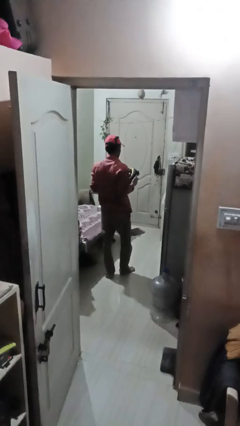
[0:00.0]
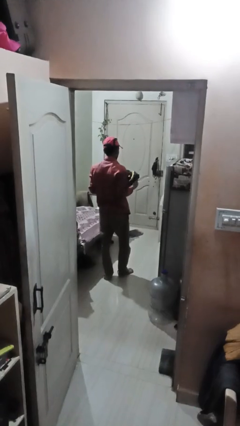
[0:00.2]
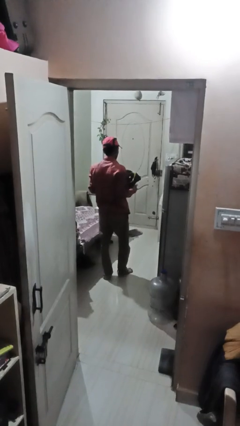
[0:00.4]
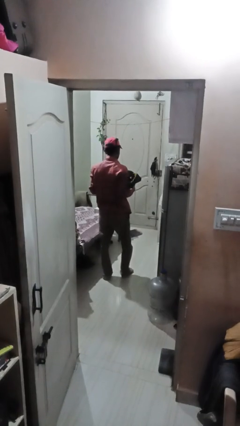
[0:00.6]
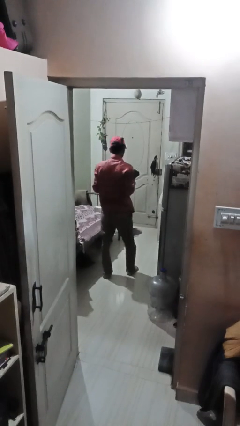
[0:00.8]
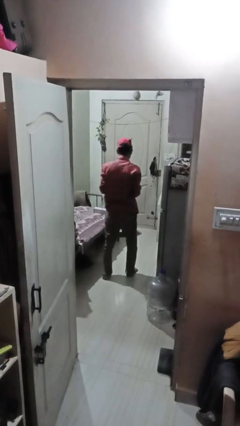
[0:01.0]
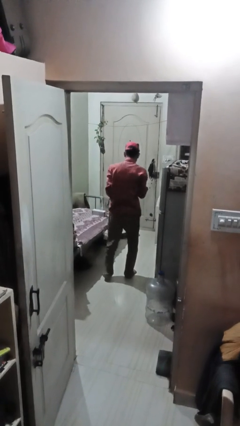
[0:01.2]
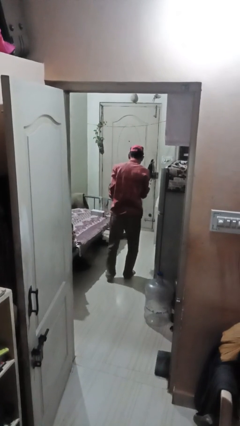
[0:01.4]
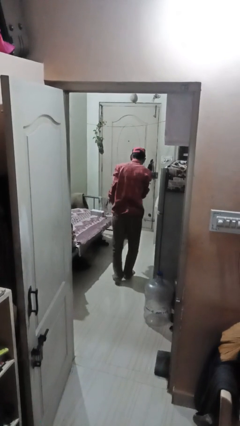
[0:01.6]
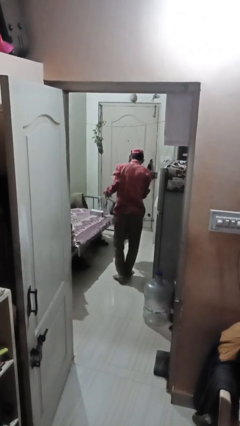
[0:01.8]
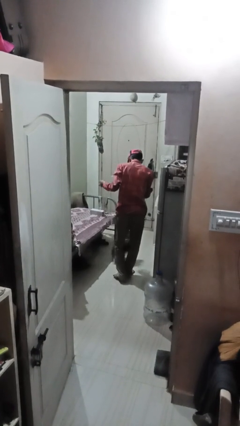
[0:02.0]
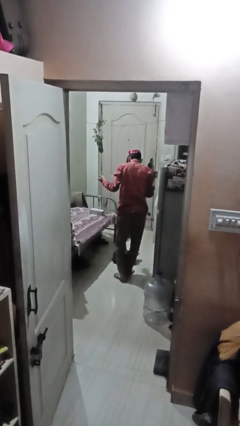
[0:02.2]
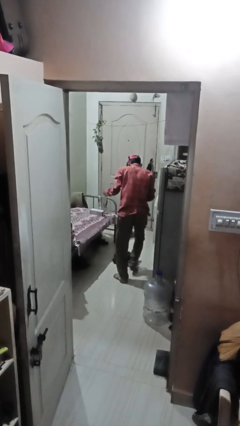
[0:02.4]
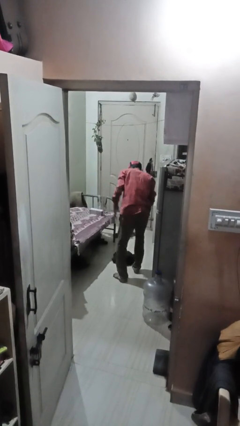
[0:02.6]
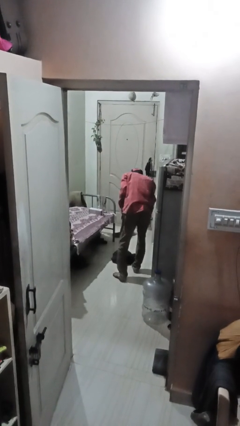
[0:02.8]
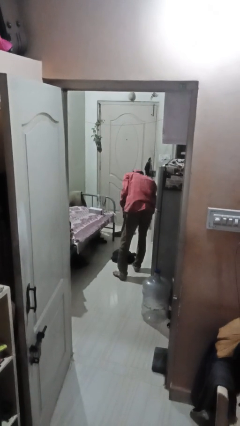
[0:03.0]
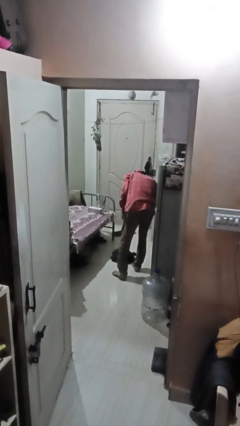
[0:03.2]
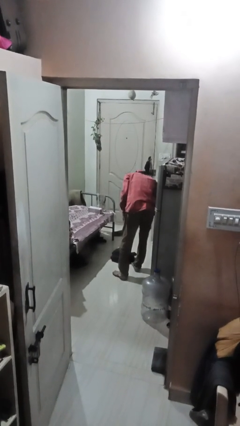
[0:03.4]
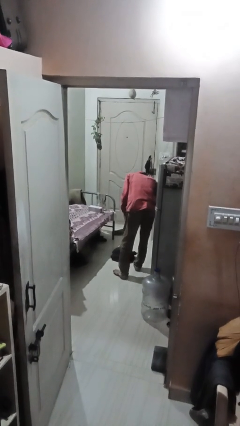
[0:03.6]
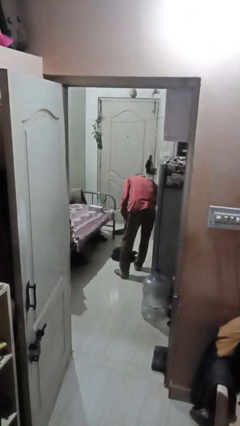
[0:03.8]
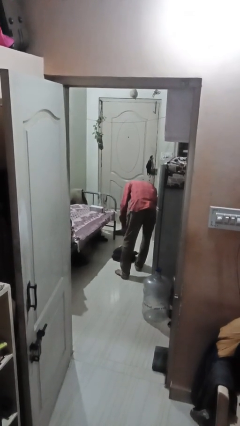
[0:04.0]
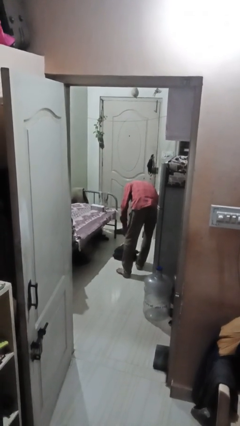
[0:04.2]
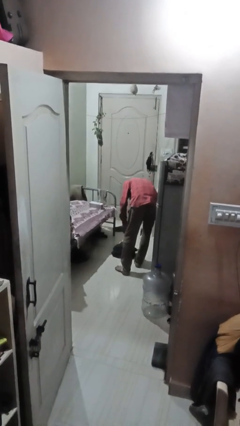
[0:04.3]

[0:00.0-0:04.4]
person drops object

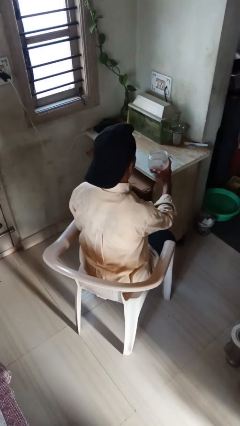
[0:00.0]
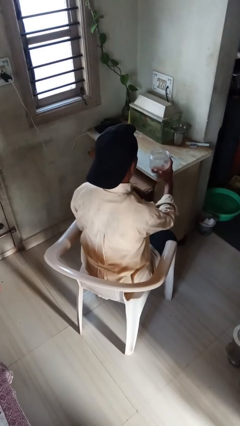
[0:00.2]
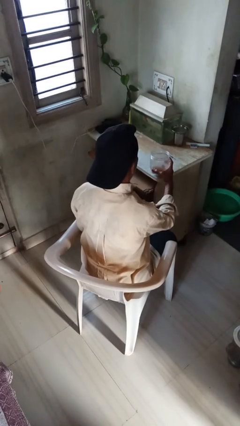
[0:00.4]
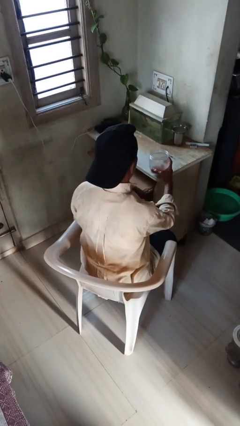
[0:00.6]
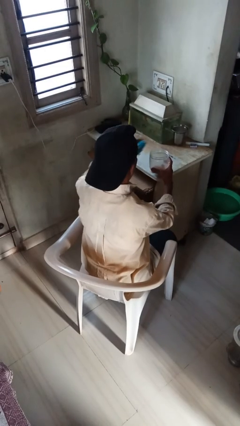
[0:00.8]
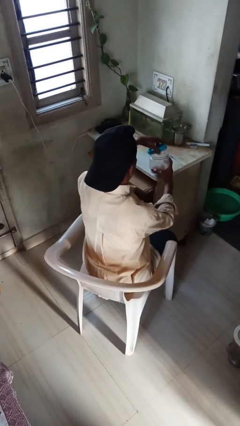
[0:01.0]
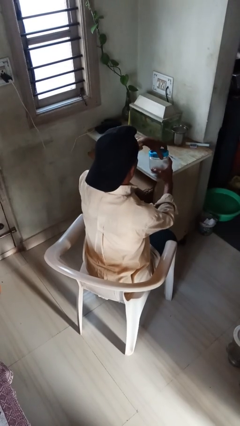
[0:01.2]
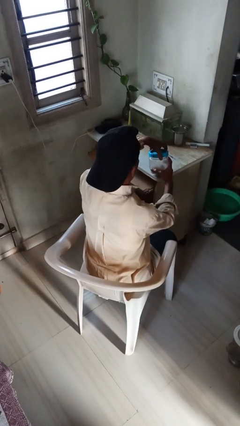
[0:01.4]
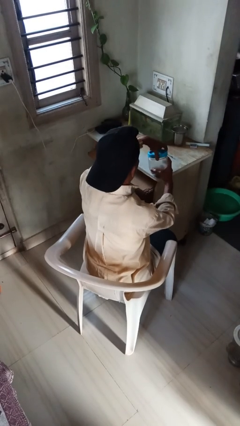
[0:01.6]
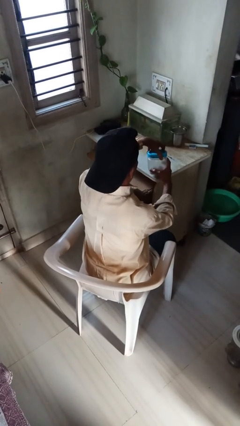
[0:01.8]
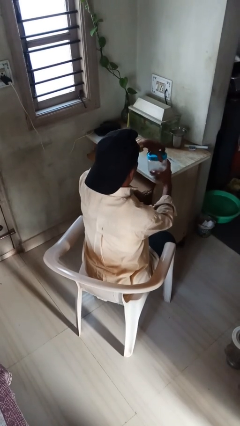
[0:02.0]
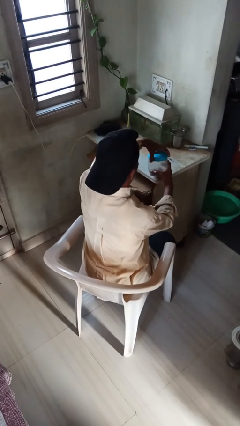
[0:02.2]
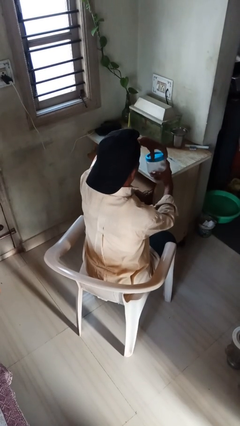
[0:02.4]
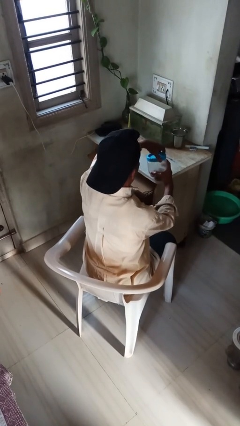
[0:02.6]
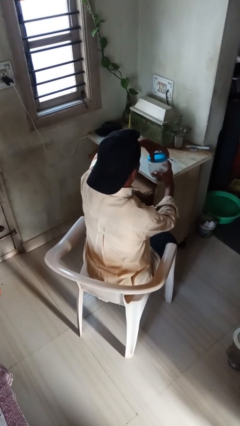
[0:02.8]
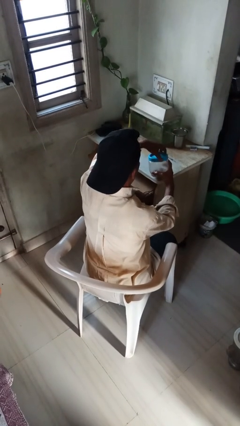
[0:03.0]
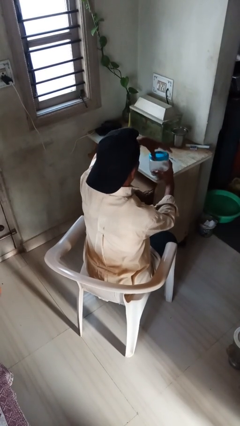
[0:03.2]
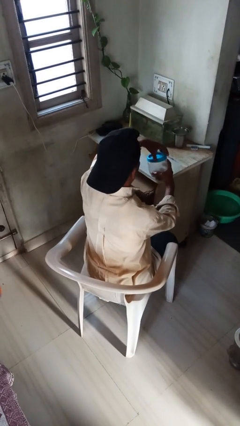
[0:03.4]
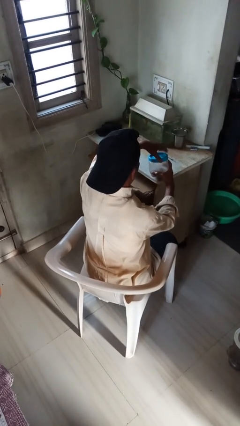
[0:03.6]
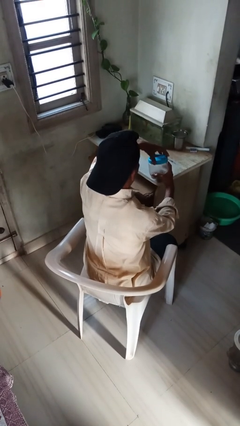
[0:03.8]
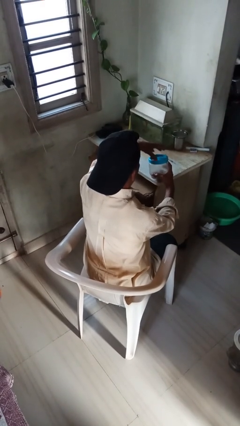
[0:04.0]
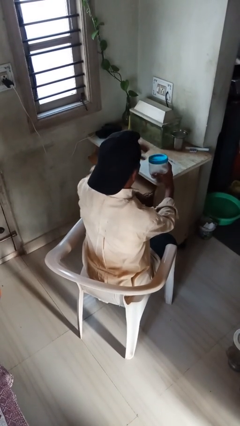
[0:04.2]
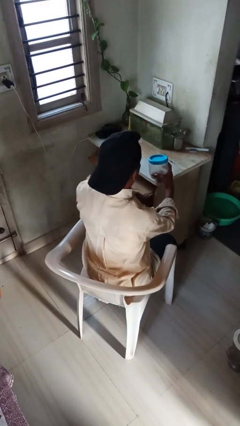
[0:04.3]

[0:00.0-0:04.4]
person closes jar

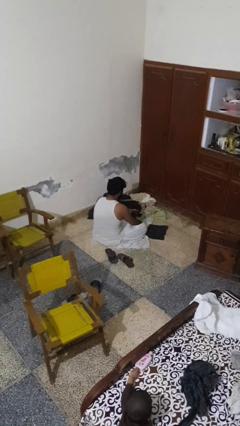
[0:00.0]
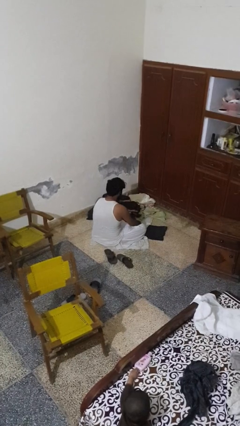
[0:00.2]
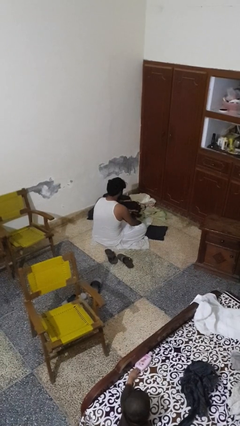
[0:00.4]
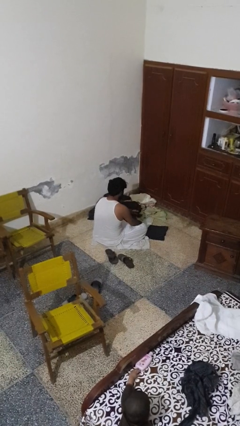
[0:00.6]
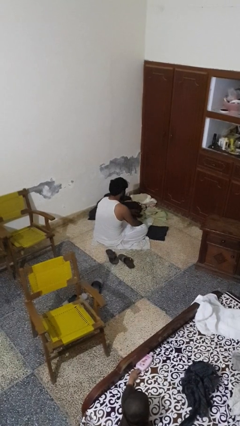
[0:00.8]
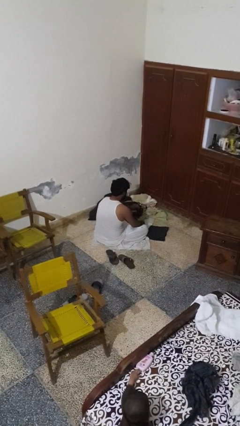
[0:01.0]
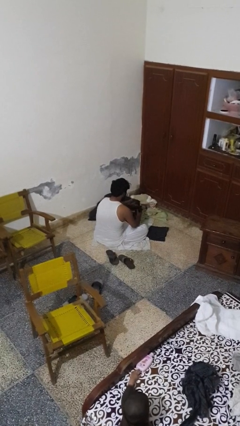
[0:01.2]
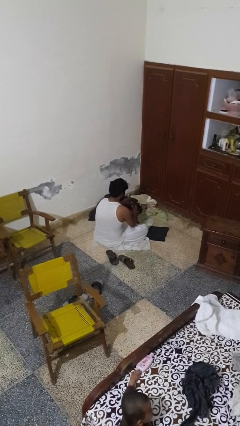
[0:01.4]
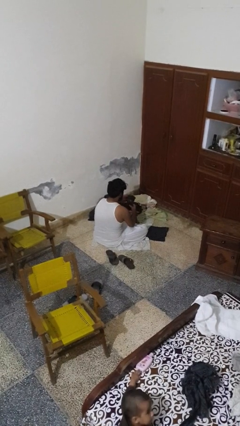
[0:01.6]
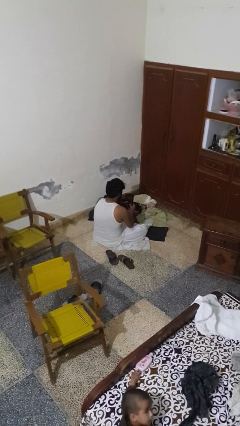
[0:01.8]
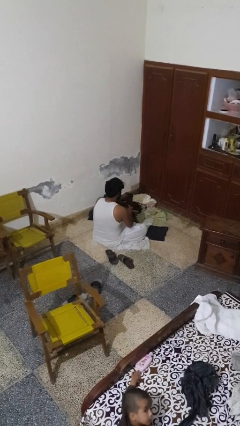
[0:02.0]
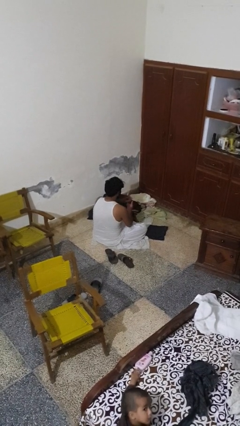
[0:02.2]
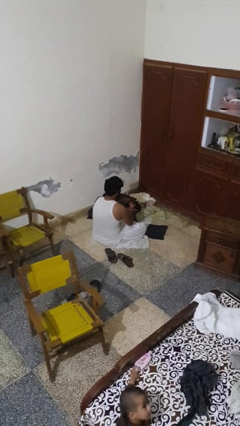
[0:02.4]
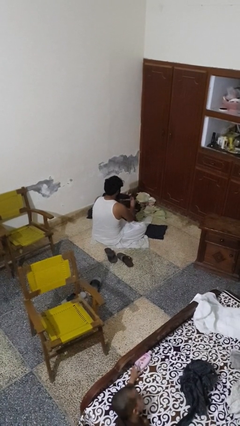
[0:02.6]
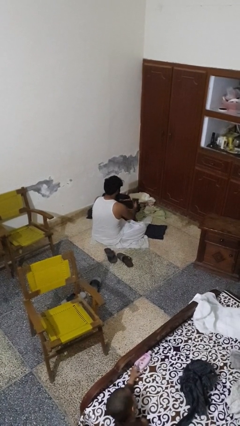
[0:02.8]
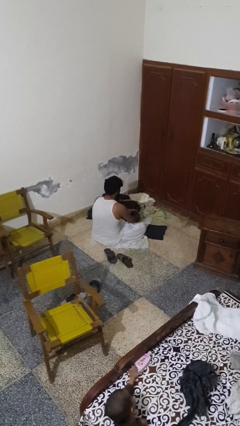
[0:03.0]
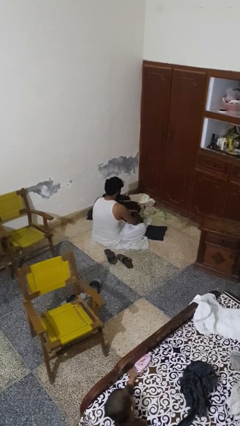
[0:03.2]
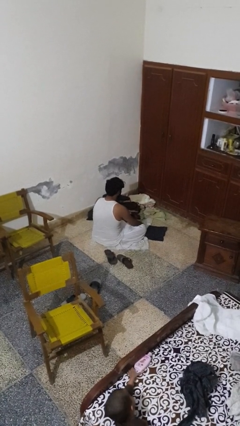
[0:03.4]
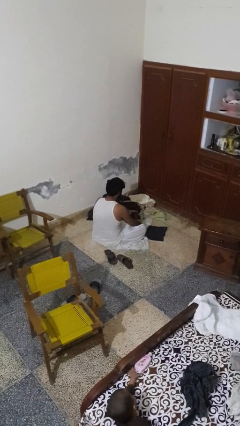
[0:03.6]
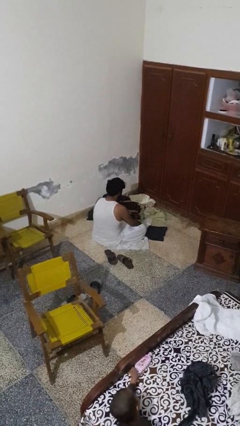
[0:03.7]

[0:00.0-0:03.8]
person folds socks

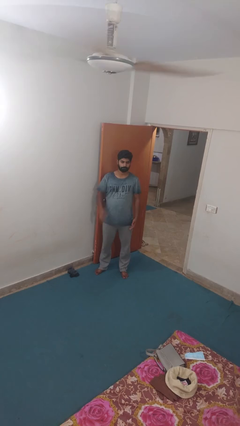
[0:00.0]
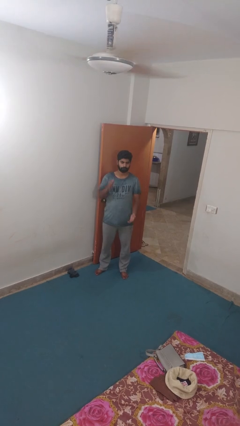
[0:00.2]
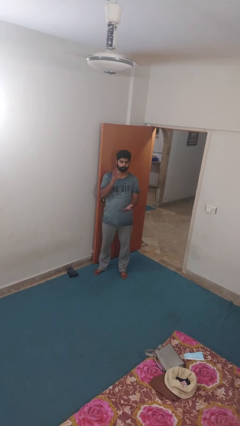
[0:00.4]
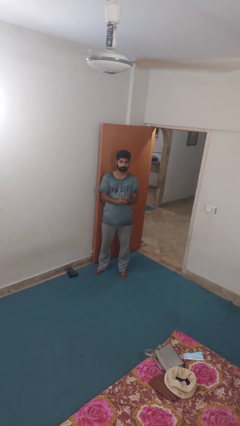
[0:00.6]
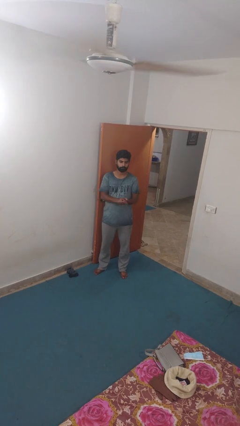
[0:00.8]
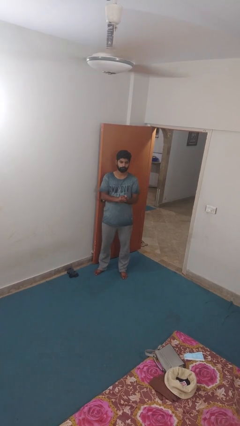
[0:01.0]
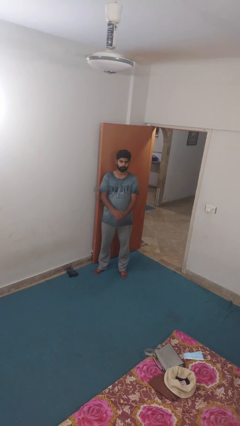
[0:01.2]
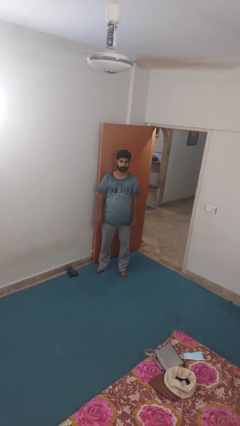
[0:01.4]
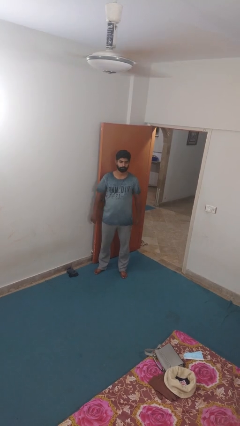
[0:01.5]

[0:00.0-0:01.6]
person claps hands

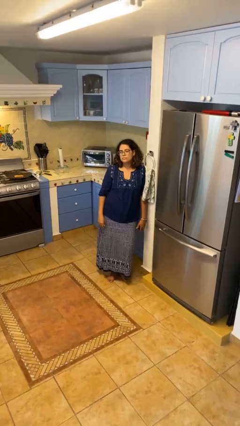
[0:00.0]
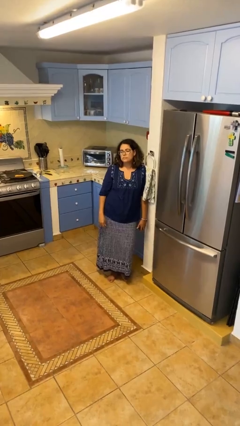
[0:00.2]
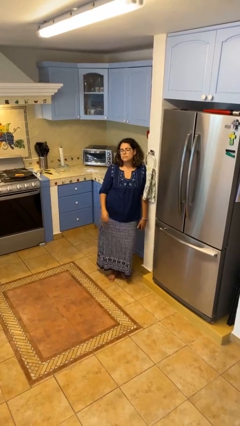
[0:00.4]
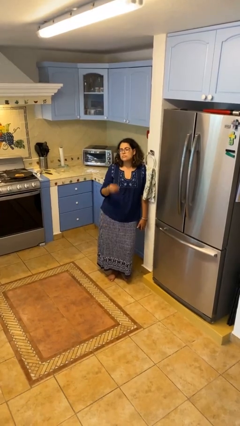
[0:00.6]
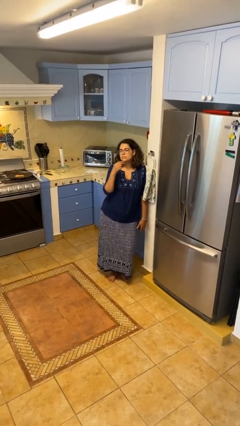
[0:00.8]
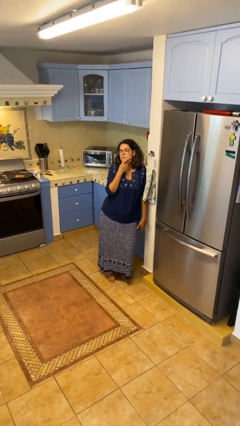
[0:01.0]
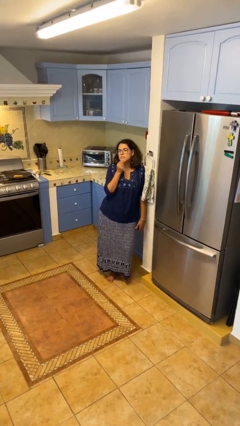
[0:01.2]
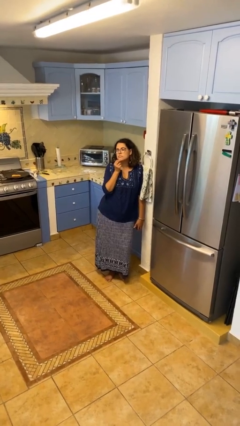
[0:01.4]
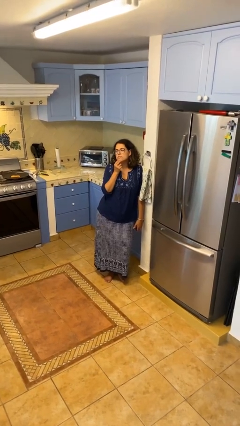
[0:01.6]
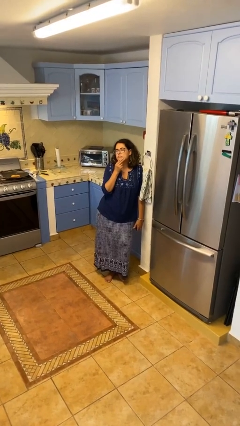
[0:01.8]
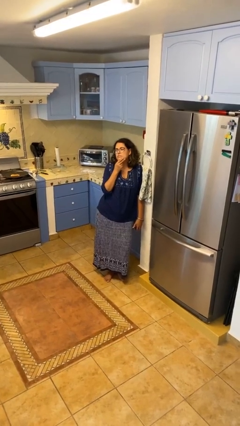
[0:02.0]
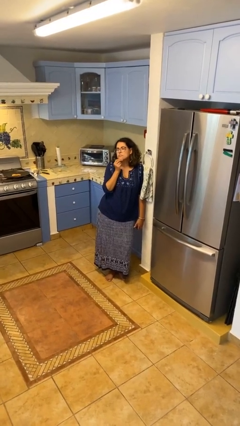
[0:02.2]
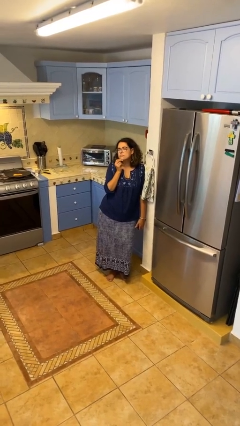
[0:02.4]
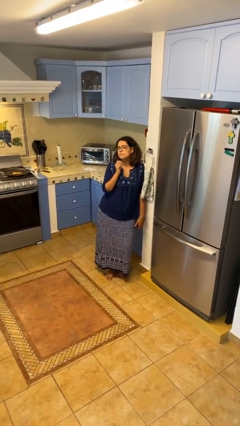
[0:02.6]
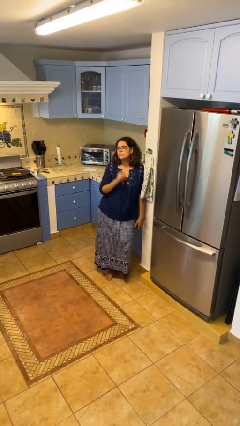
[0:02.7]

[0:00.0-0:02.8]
person strokes chin

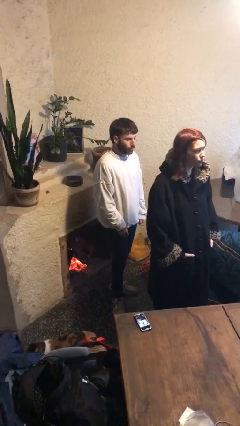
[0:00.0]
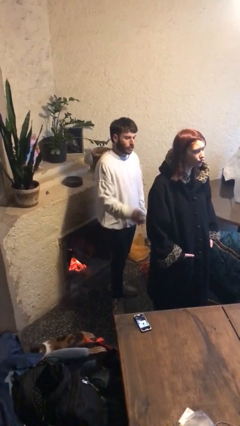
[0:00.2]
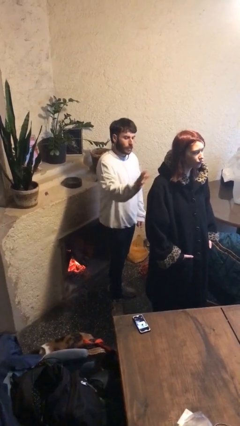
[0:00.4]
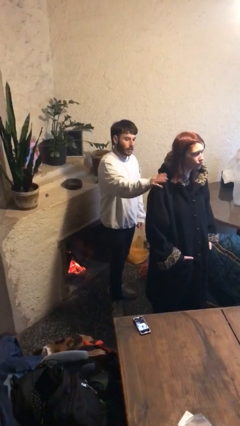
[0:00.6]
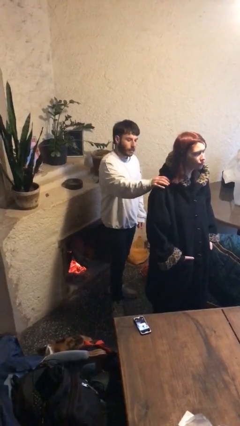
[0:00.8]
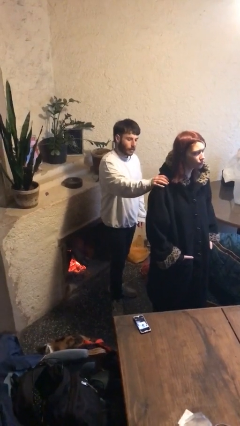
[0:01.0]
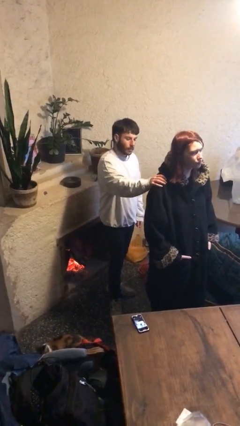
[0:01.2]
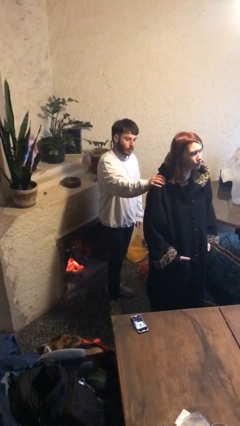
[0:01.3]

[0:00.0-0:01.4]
person grabs person by shoulder
